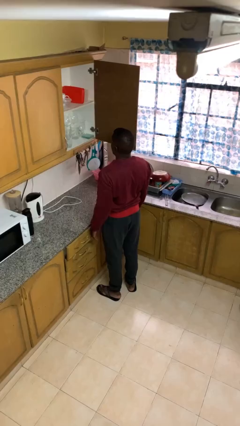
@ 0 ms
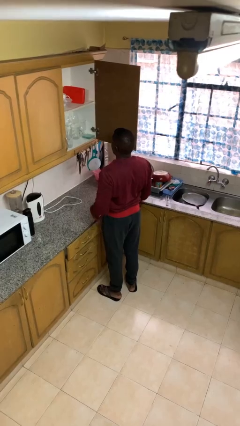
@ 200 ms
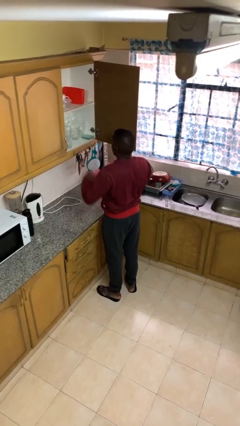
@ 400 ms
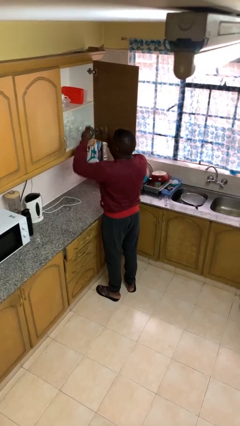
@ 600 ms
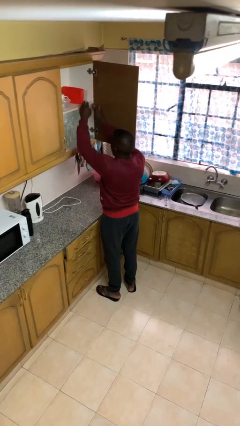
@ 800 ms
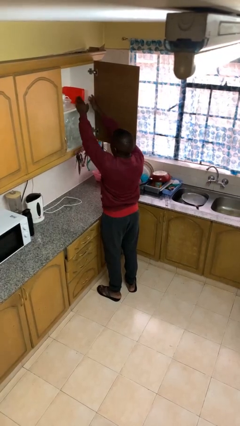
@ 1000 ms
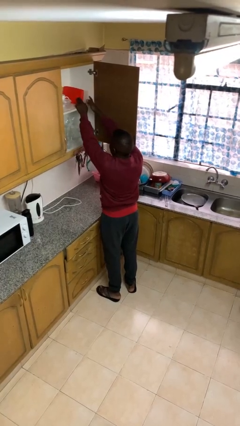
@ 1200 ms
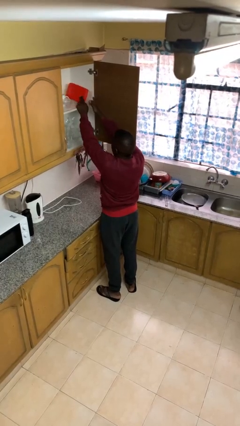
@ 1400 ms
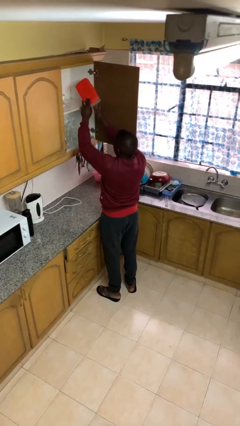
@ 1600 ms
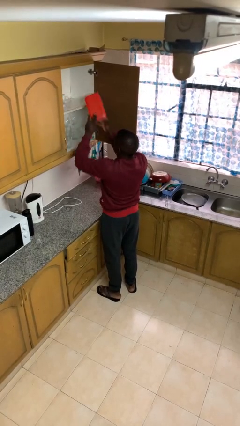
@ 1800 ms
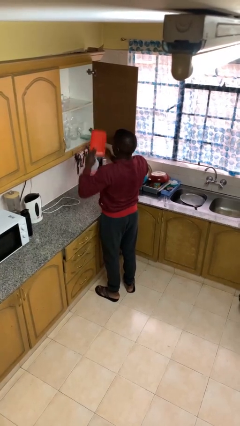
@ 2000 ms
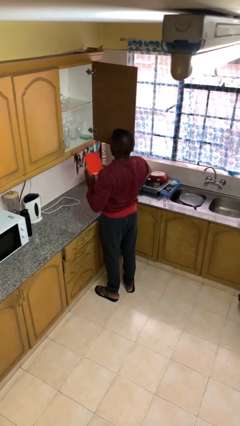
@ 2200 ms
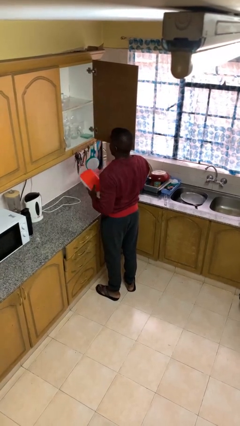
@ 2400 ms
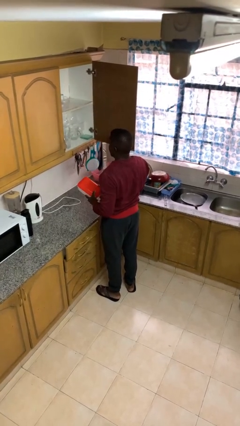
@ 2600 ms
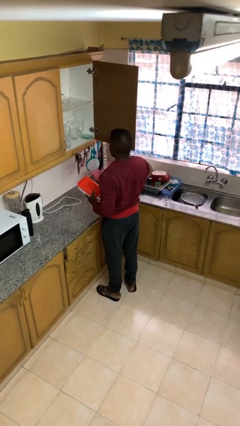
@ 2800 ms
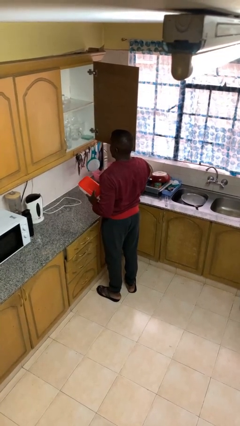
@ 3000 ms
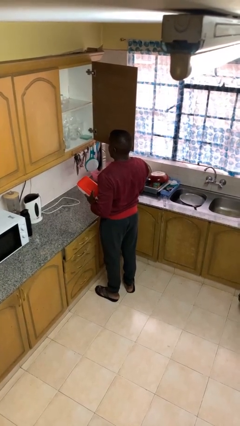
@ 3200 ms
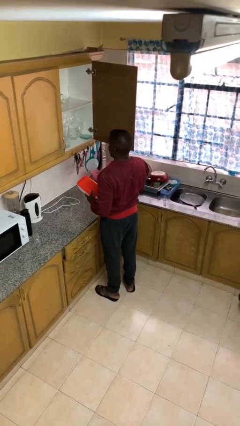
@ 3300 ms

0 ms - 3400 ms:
person picks up object from cabinet

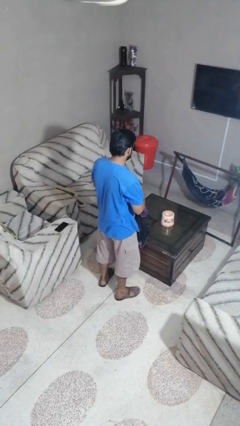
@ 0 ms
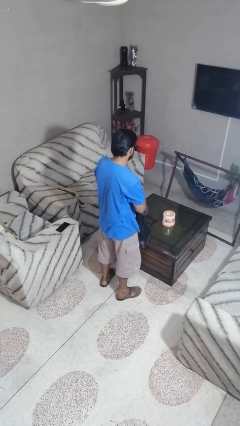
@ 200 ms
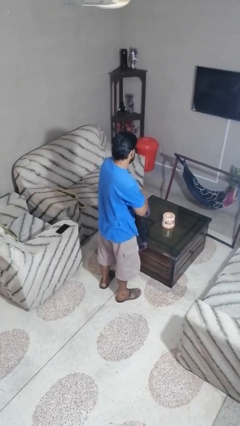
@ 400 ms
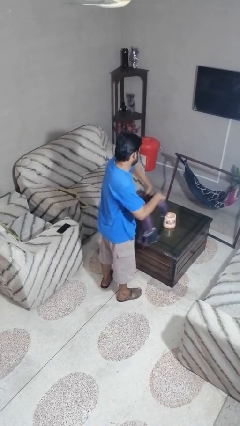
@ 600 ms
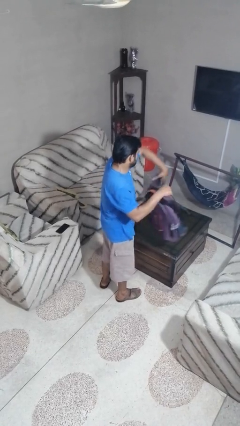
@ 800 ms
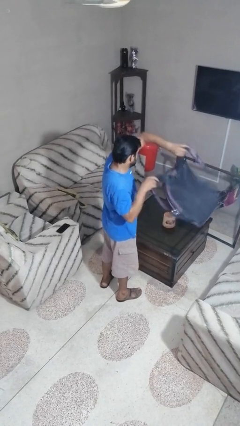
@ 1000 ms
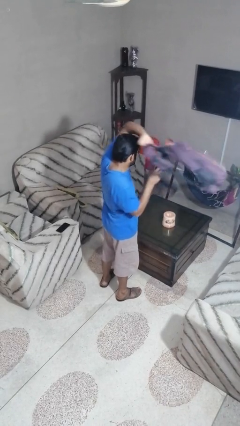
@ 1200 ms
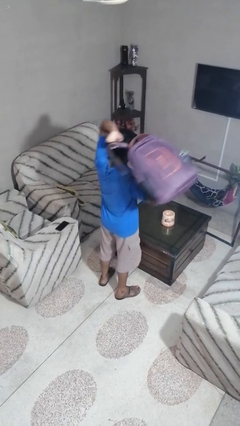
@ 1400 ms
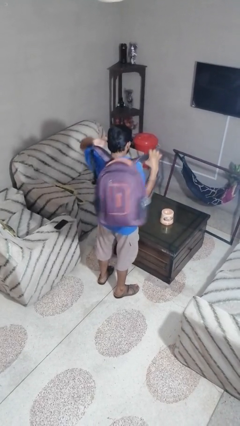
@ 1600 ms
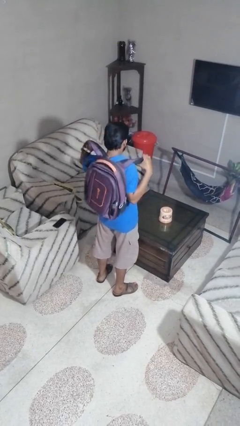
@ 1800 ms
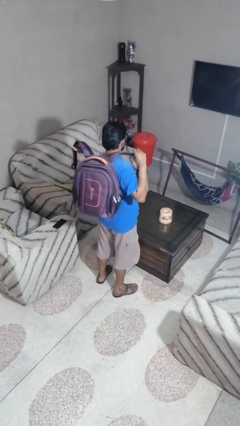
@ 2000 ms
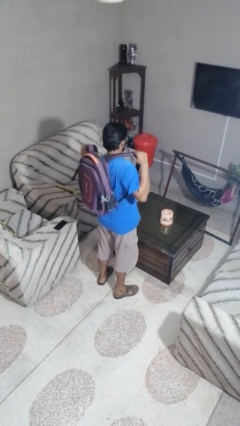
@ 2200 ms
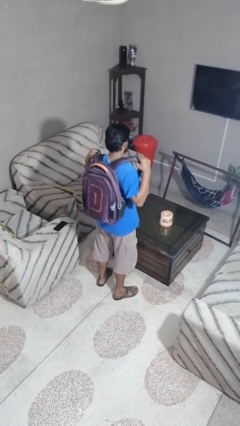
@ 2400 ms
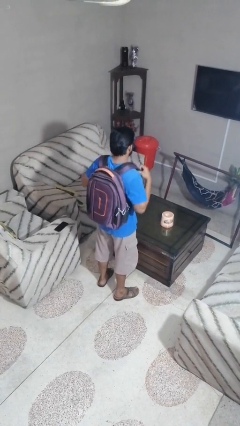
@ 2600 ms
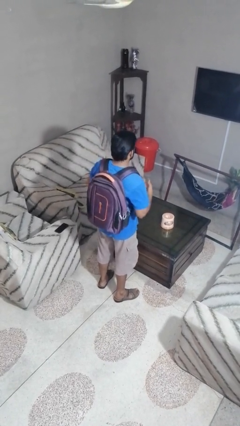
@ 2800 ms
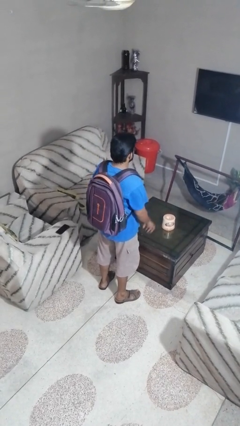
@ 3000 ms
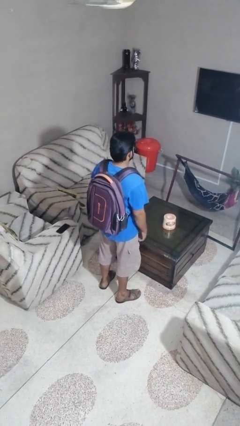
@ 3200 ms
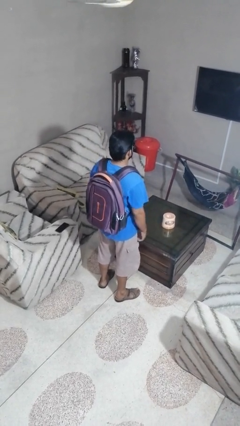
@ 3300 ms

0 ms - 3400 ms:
person puts on backpack

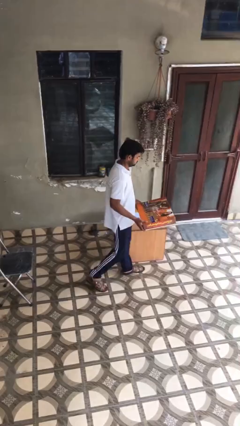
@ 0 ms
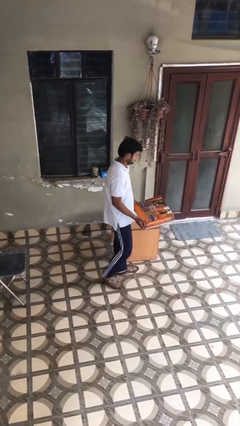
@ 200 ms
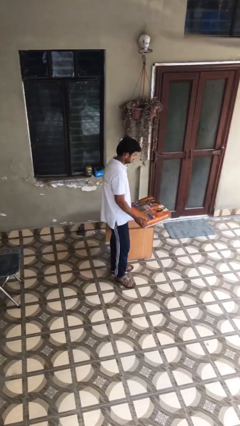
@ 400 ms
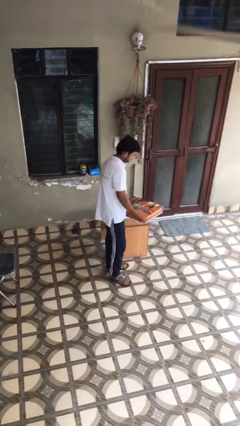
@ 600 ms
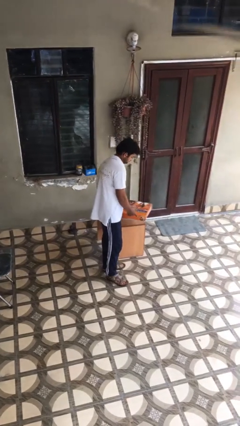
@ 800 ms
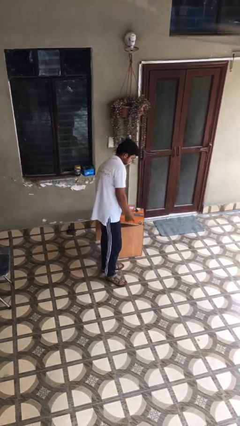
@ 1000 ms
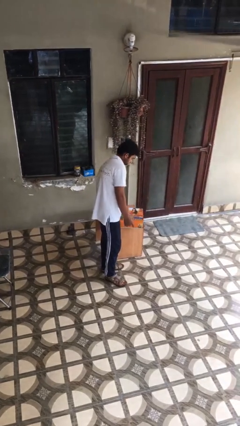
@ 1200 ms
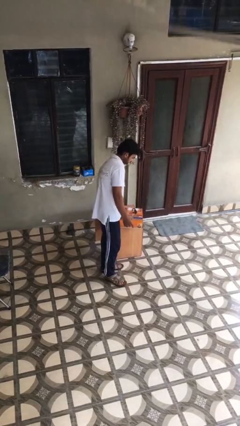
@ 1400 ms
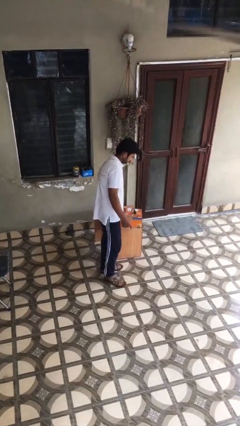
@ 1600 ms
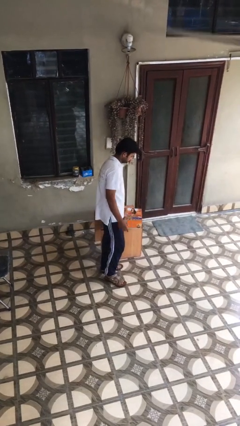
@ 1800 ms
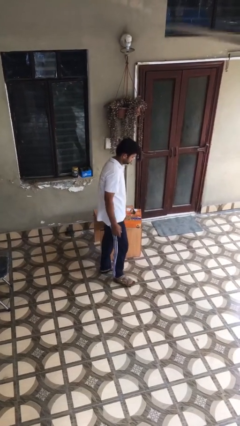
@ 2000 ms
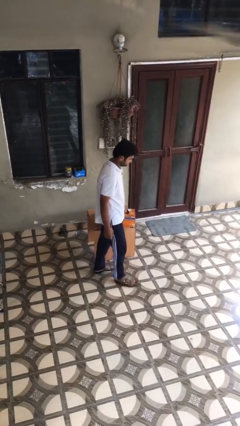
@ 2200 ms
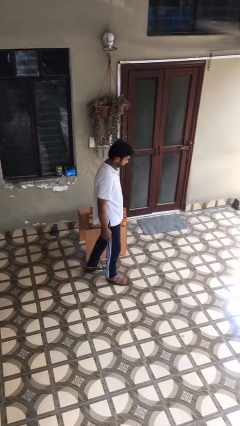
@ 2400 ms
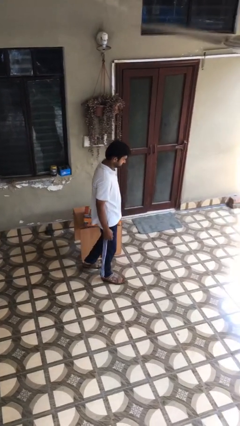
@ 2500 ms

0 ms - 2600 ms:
person puts down object on table

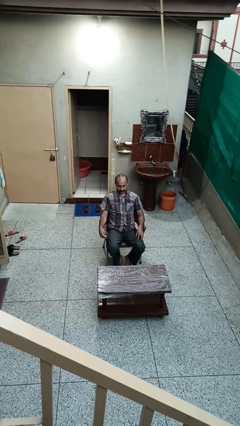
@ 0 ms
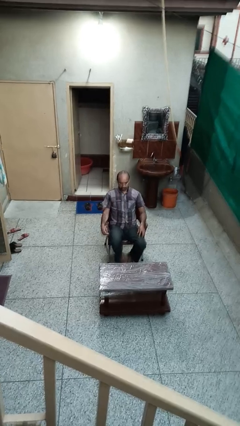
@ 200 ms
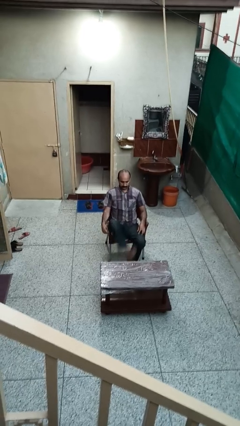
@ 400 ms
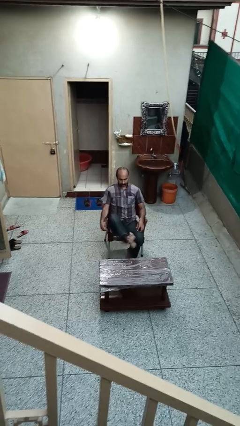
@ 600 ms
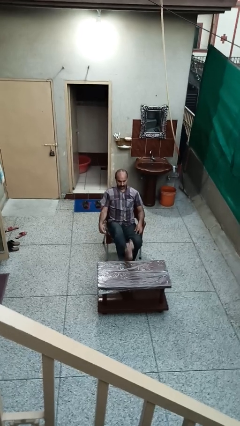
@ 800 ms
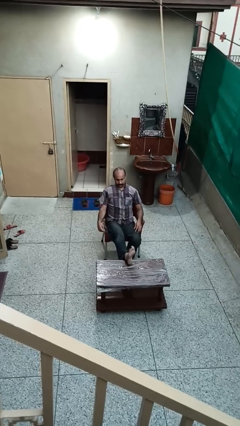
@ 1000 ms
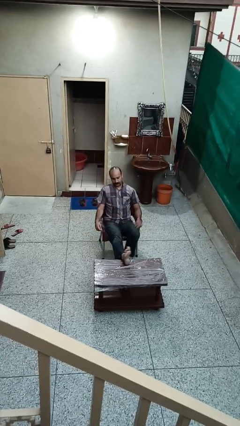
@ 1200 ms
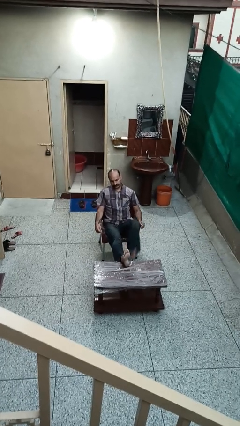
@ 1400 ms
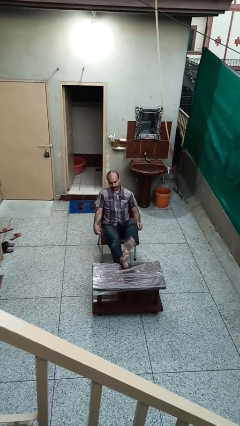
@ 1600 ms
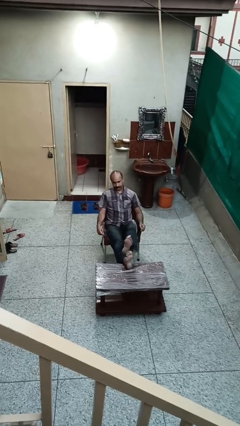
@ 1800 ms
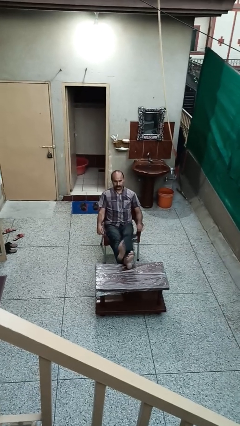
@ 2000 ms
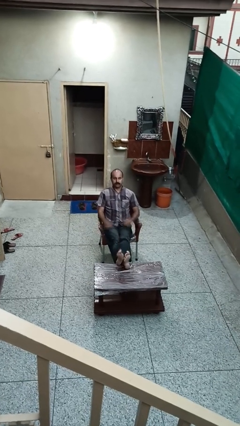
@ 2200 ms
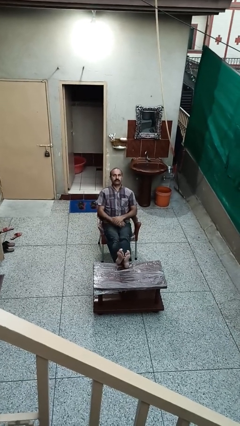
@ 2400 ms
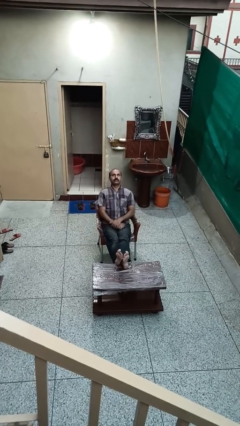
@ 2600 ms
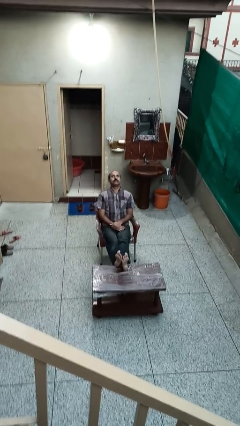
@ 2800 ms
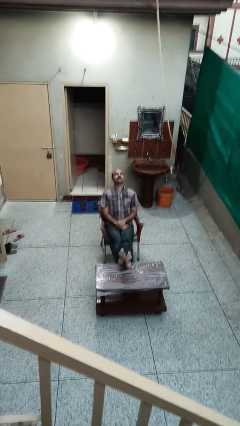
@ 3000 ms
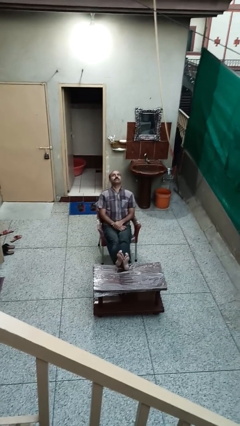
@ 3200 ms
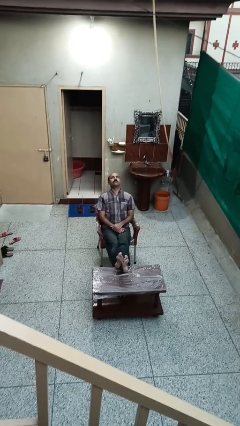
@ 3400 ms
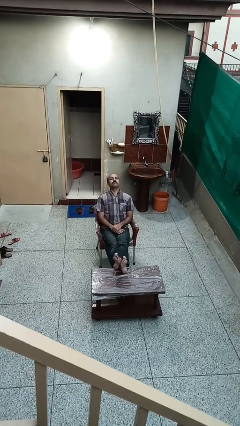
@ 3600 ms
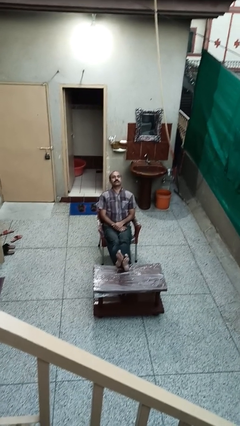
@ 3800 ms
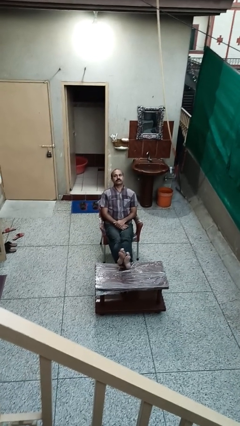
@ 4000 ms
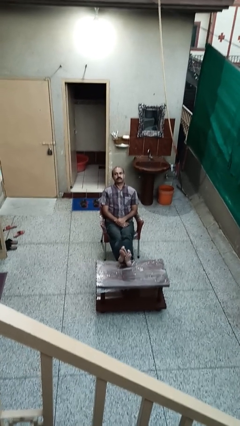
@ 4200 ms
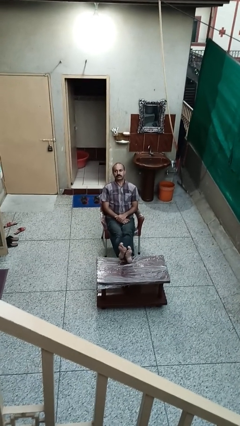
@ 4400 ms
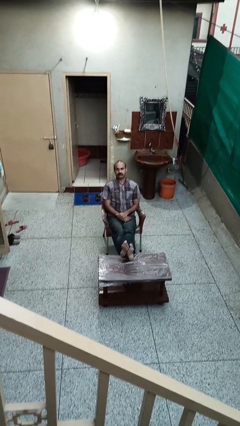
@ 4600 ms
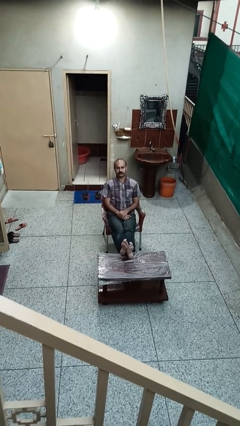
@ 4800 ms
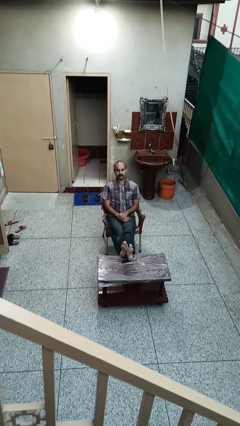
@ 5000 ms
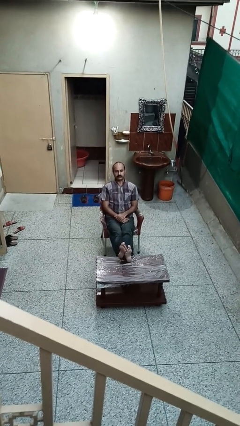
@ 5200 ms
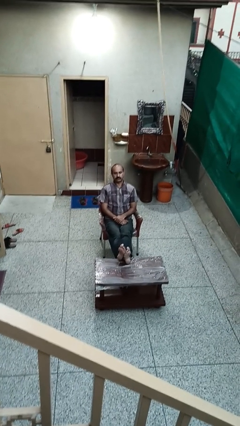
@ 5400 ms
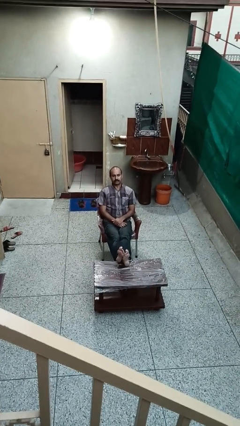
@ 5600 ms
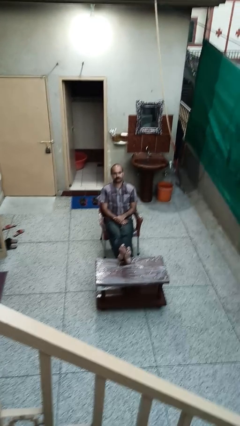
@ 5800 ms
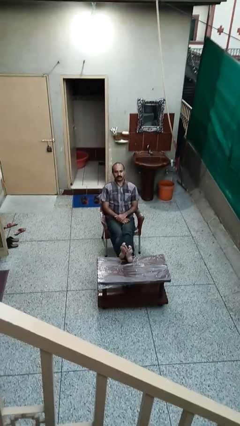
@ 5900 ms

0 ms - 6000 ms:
person puts feet up

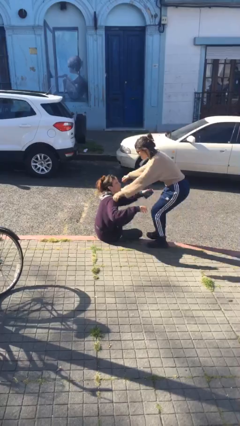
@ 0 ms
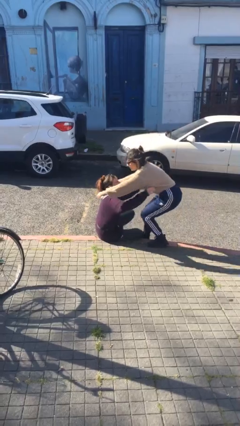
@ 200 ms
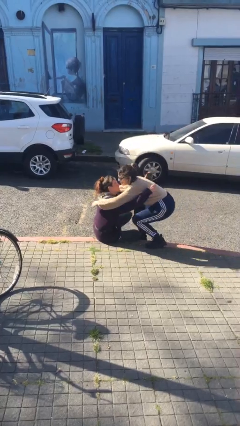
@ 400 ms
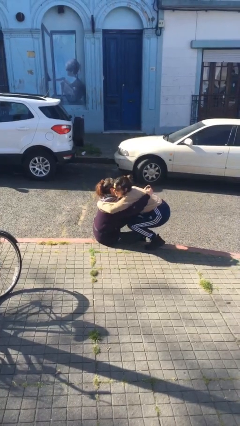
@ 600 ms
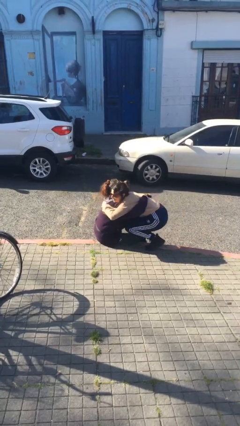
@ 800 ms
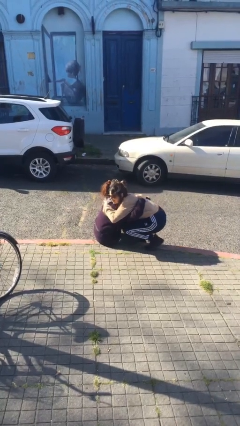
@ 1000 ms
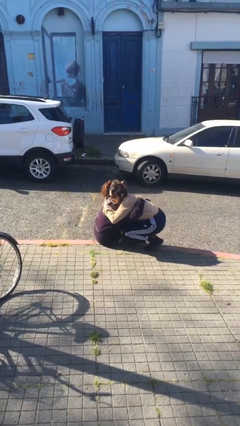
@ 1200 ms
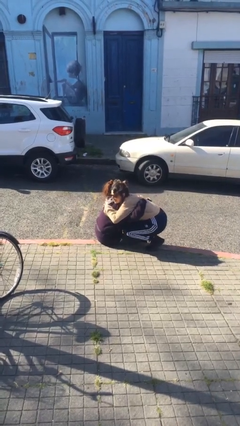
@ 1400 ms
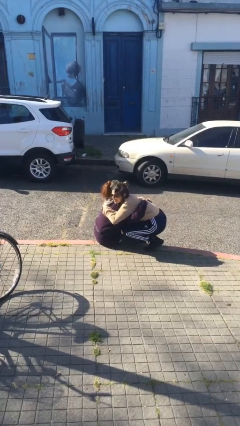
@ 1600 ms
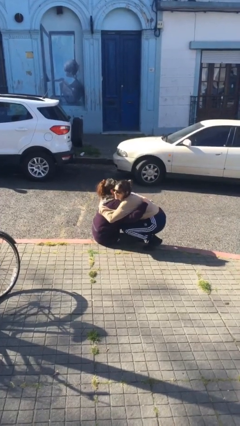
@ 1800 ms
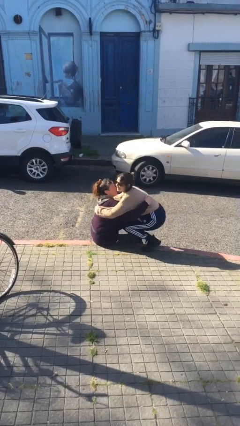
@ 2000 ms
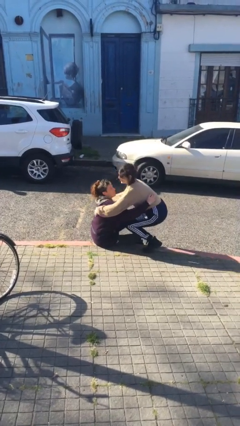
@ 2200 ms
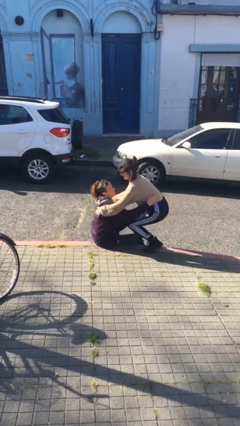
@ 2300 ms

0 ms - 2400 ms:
person embraces person
